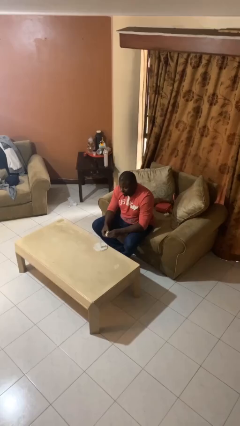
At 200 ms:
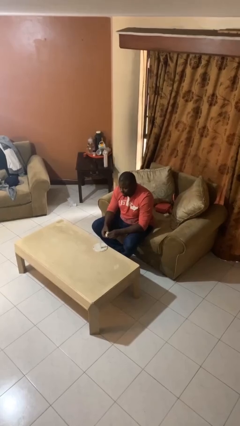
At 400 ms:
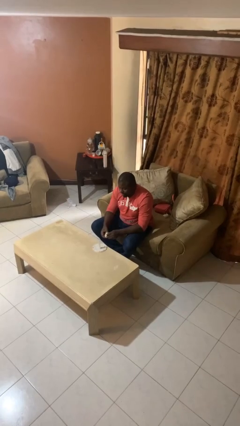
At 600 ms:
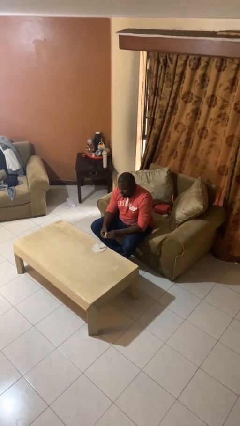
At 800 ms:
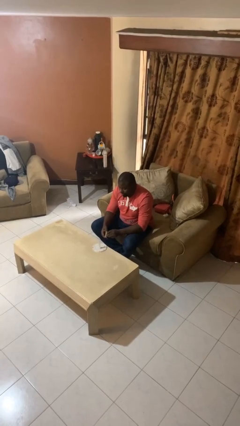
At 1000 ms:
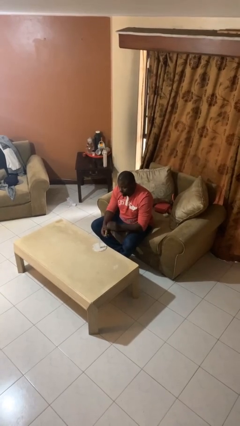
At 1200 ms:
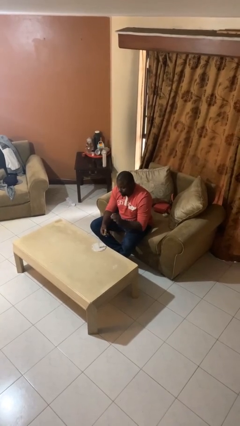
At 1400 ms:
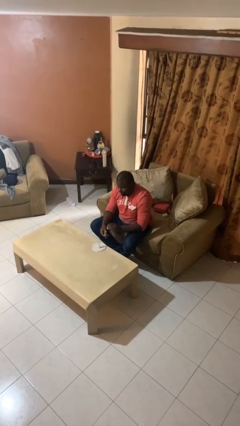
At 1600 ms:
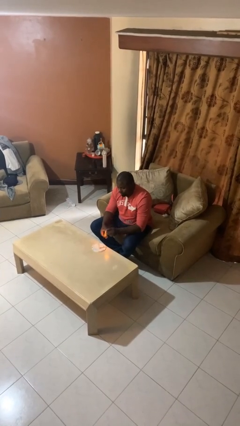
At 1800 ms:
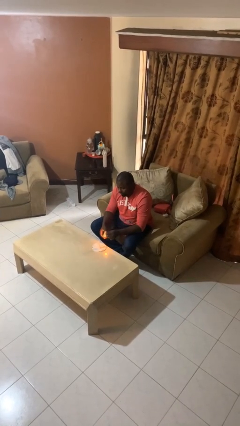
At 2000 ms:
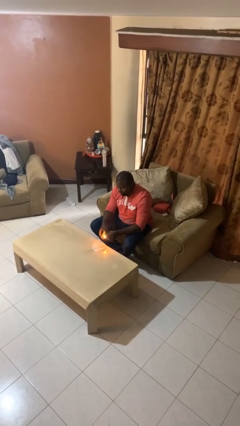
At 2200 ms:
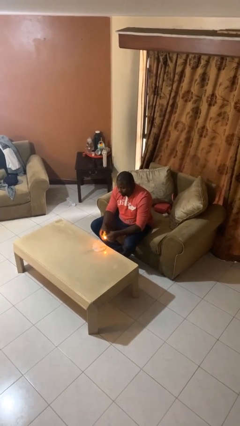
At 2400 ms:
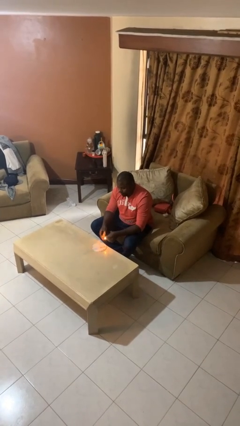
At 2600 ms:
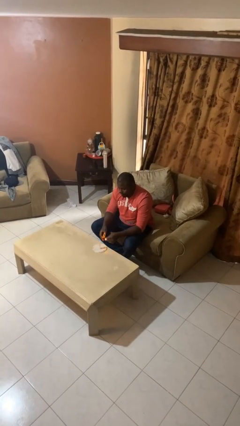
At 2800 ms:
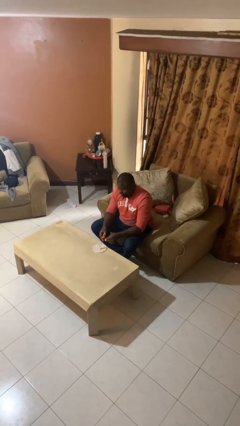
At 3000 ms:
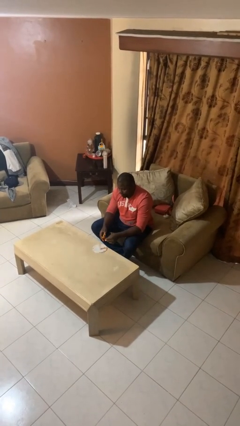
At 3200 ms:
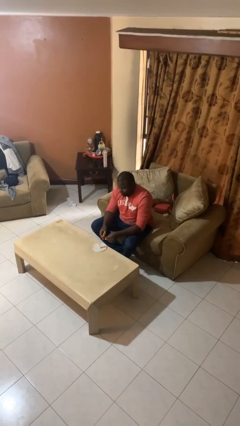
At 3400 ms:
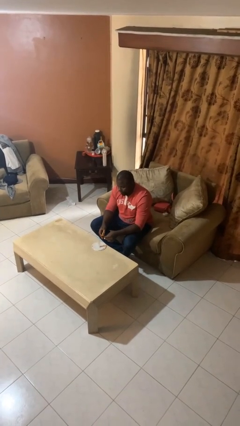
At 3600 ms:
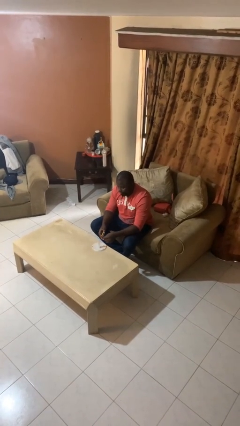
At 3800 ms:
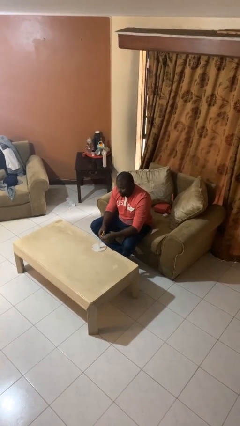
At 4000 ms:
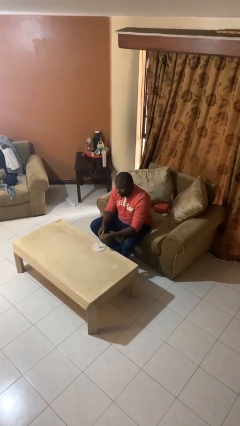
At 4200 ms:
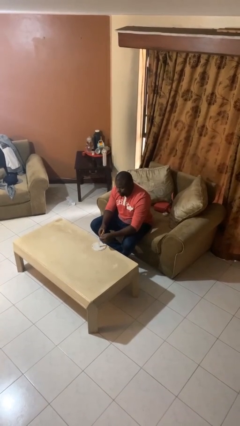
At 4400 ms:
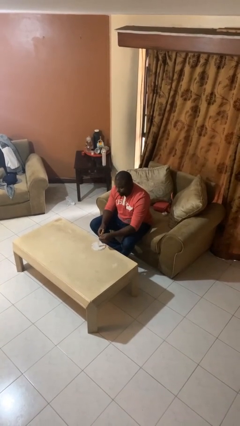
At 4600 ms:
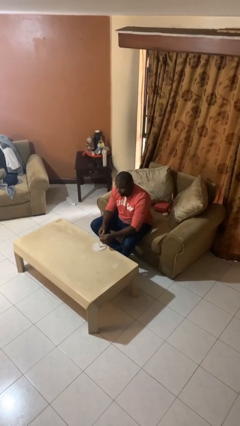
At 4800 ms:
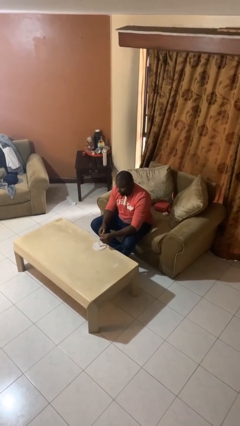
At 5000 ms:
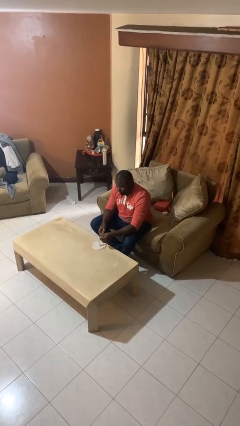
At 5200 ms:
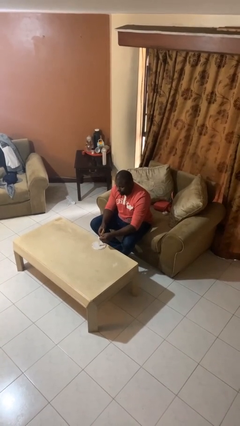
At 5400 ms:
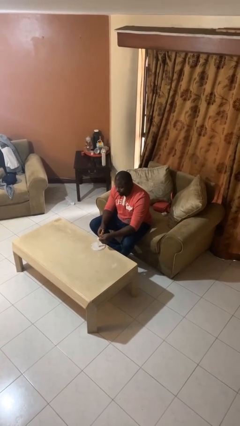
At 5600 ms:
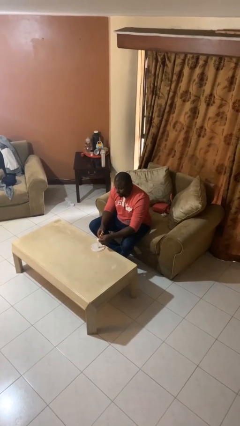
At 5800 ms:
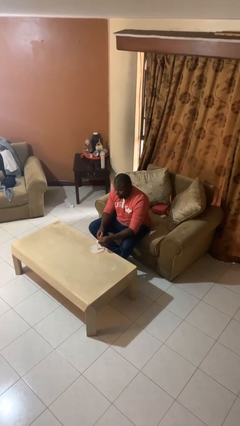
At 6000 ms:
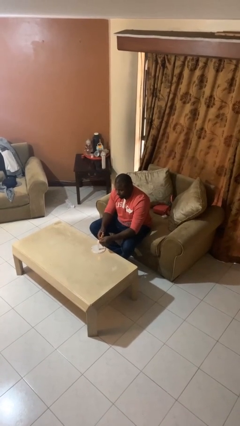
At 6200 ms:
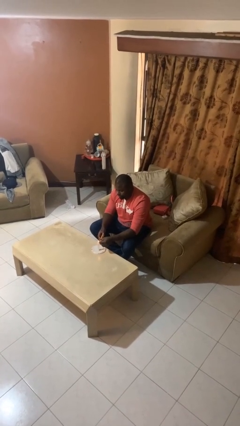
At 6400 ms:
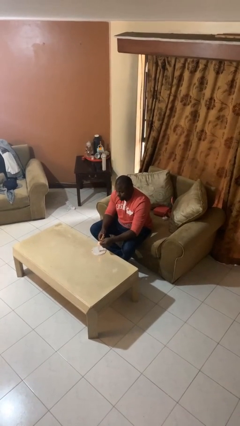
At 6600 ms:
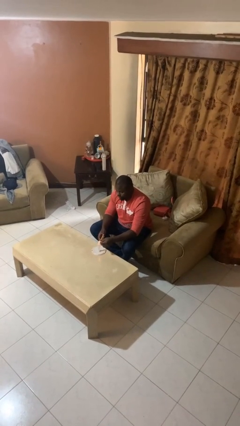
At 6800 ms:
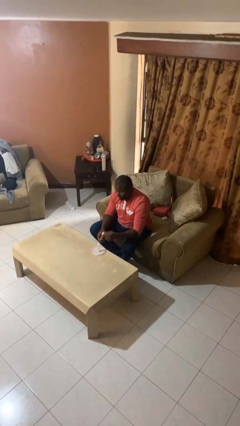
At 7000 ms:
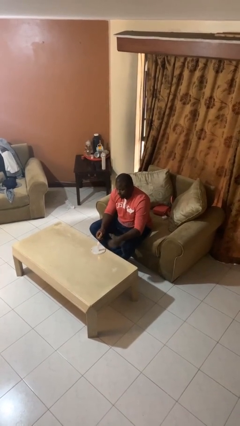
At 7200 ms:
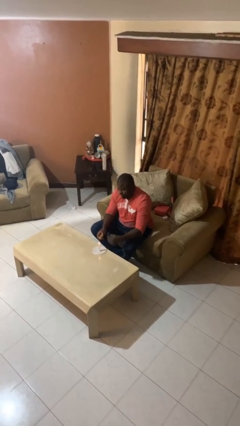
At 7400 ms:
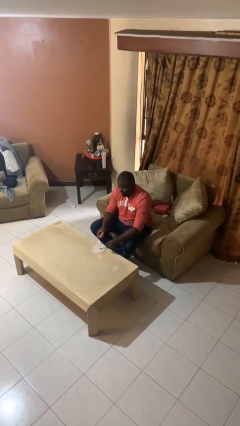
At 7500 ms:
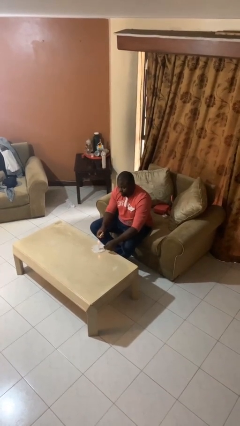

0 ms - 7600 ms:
person lights candle

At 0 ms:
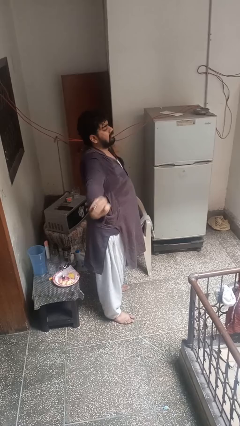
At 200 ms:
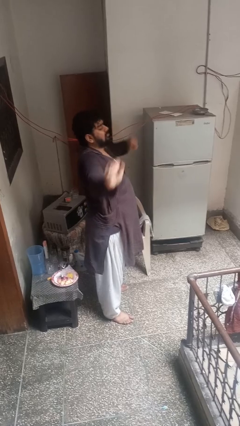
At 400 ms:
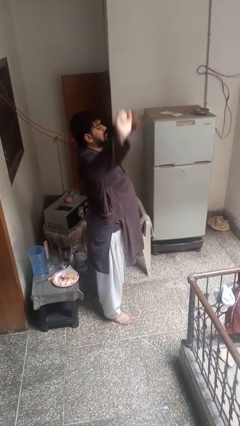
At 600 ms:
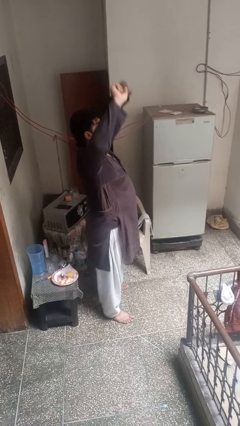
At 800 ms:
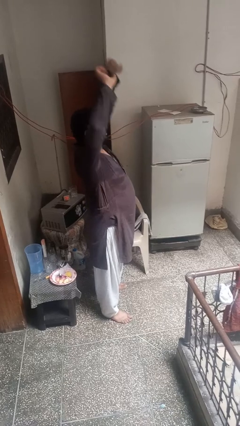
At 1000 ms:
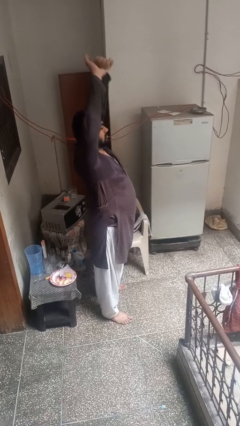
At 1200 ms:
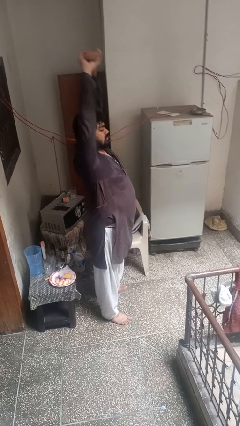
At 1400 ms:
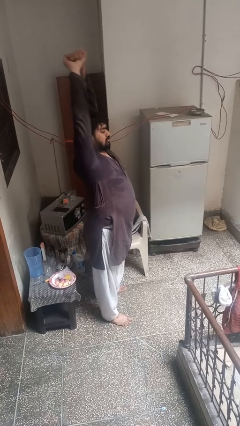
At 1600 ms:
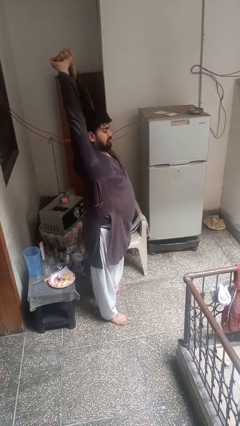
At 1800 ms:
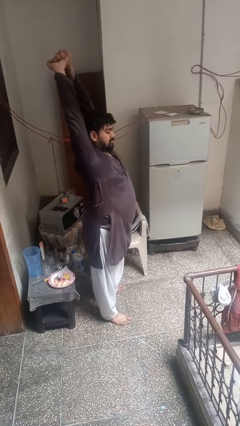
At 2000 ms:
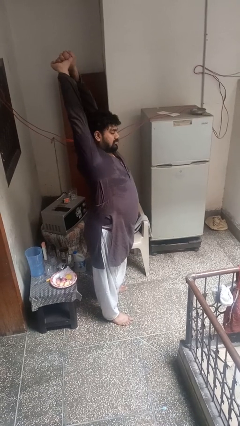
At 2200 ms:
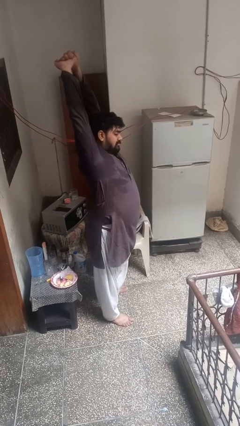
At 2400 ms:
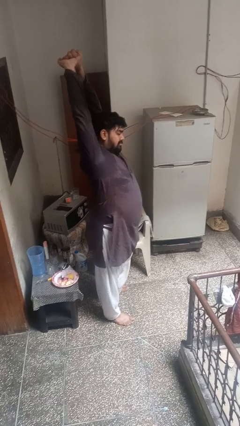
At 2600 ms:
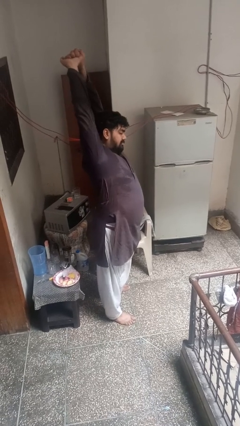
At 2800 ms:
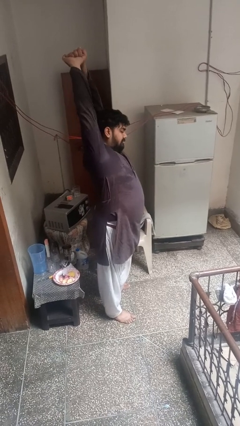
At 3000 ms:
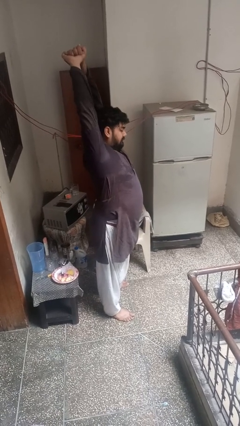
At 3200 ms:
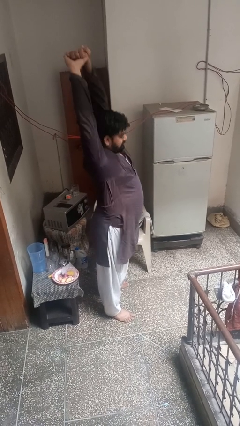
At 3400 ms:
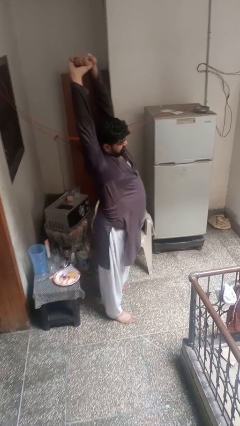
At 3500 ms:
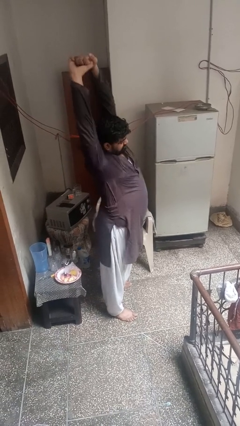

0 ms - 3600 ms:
person stretches arms over head

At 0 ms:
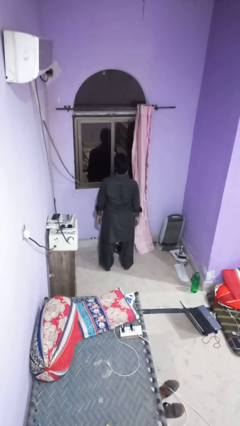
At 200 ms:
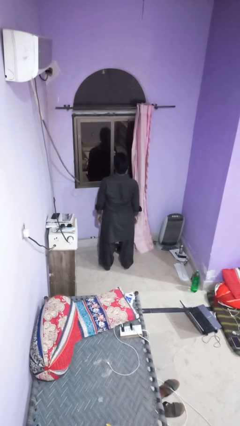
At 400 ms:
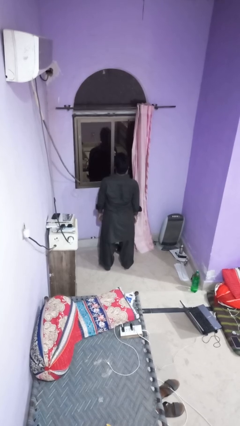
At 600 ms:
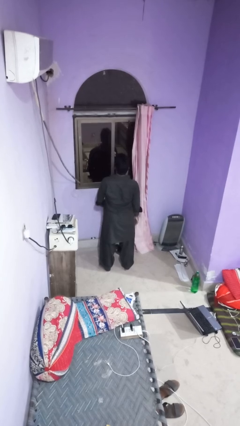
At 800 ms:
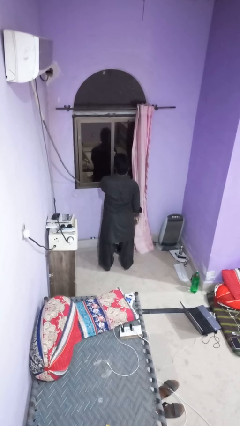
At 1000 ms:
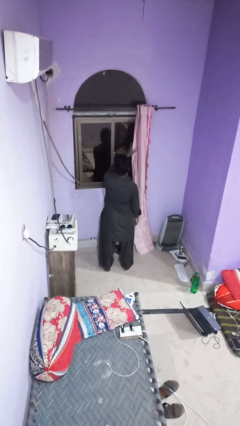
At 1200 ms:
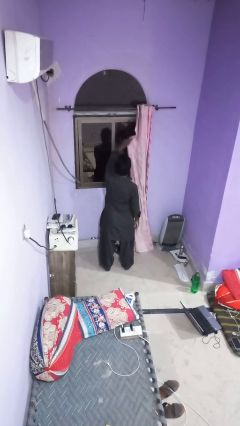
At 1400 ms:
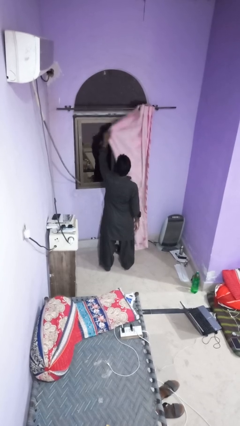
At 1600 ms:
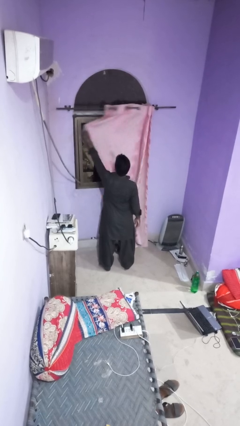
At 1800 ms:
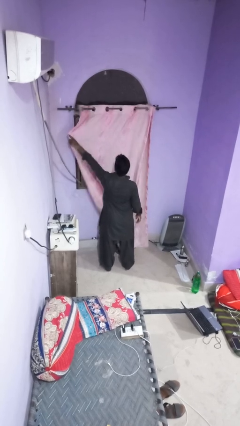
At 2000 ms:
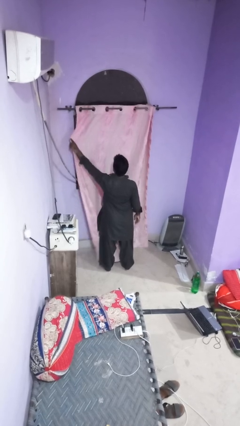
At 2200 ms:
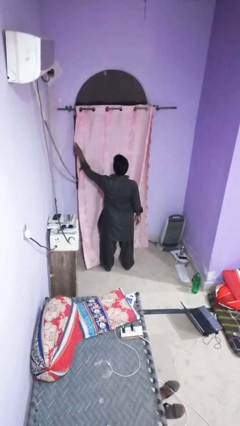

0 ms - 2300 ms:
person closes curtains

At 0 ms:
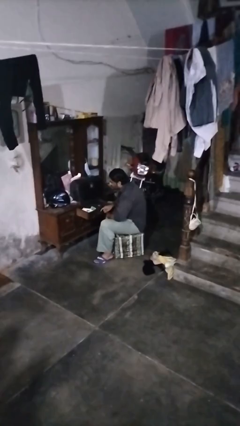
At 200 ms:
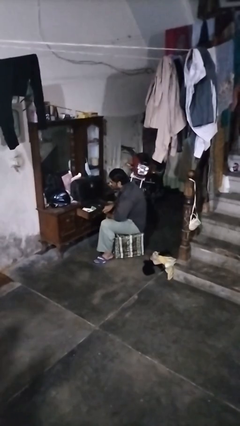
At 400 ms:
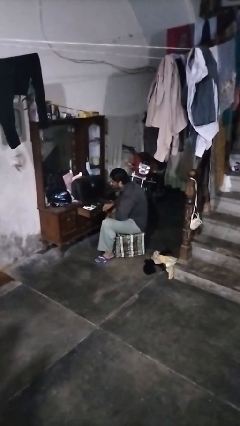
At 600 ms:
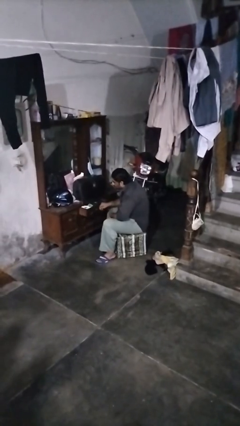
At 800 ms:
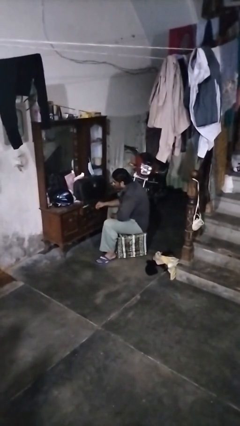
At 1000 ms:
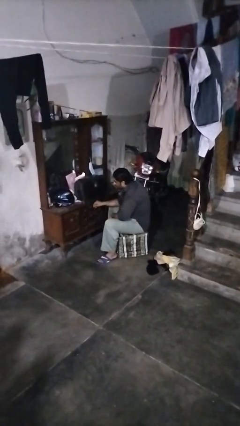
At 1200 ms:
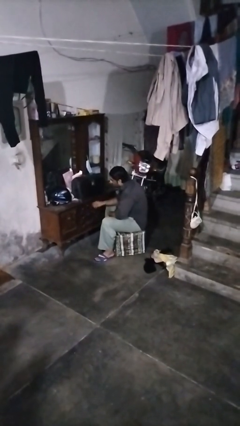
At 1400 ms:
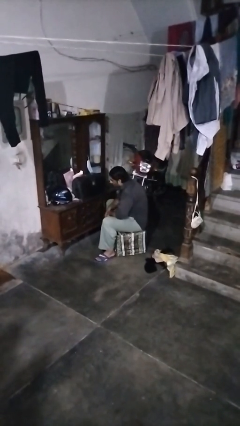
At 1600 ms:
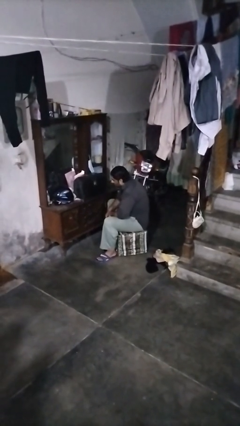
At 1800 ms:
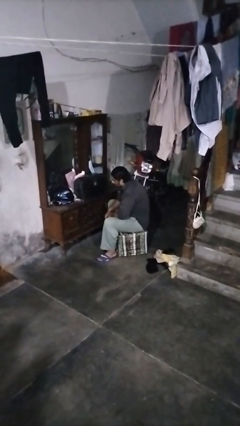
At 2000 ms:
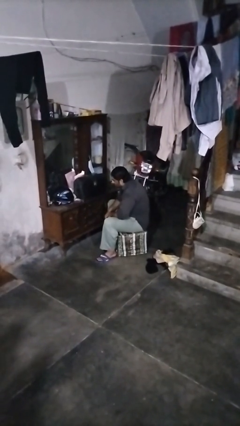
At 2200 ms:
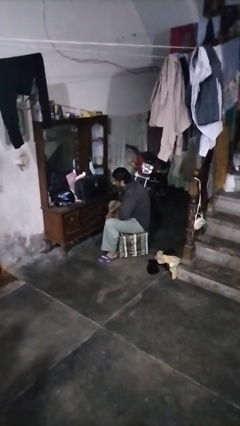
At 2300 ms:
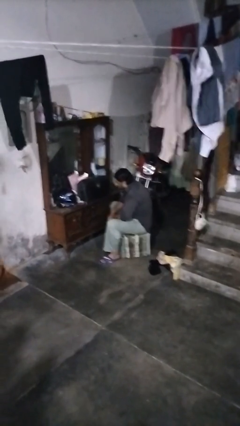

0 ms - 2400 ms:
person closes dresser drawer

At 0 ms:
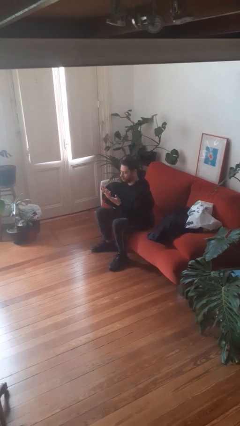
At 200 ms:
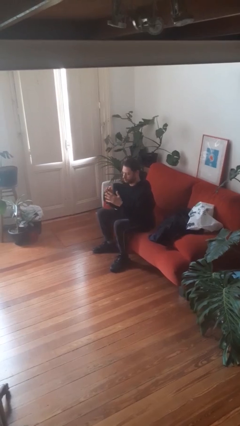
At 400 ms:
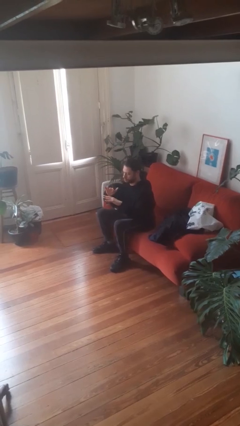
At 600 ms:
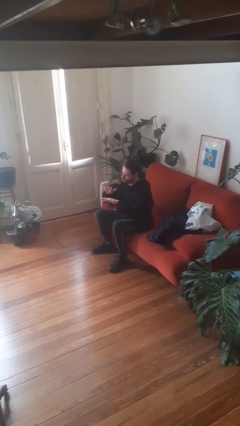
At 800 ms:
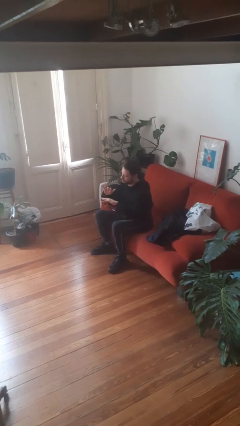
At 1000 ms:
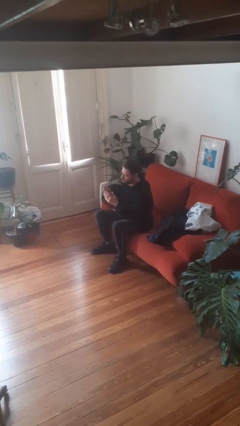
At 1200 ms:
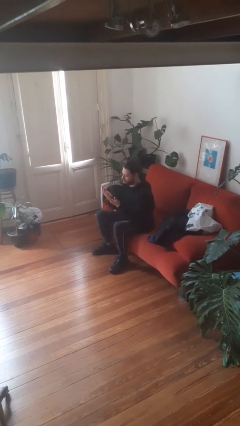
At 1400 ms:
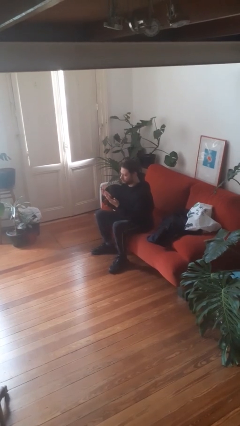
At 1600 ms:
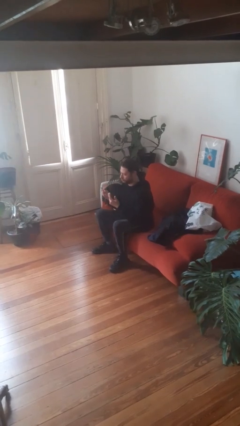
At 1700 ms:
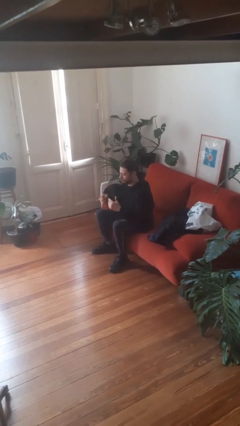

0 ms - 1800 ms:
person looks at hands in lap
